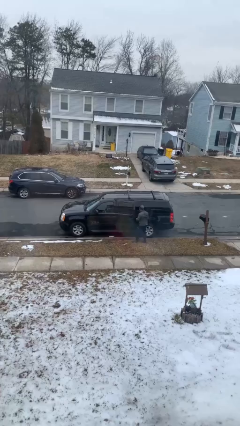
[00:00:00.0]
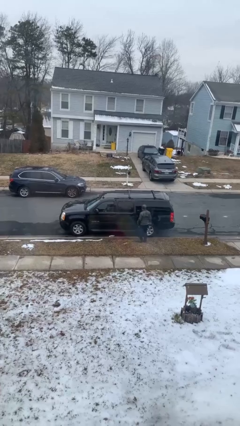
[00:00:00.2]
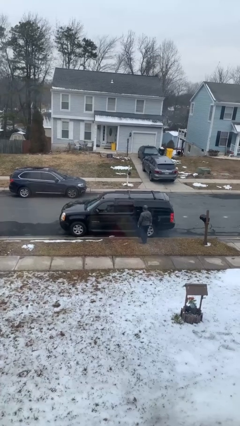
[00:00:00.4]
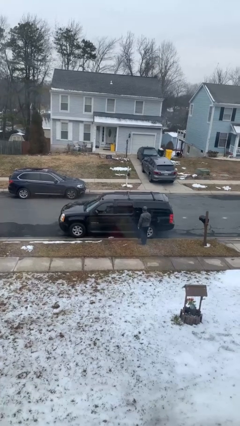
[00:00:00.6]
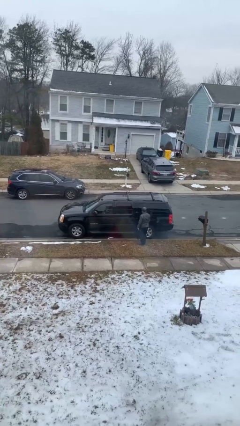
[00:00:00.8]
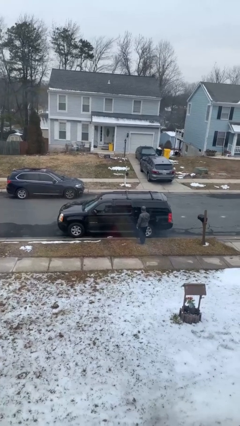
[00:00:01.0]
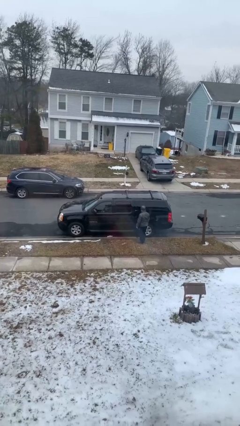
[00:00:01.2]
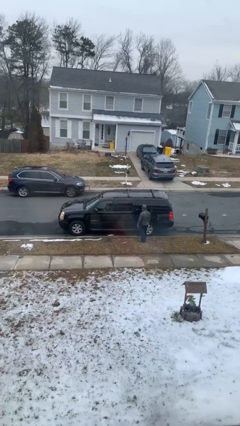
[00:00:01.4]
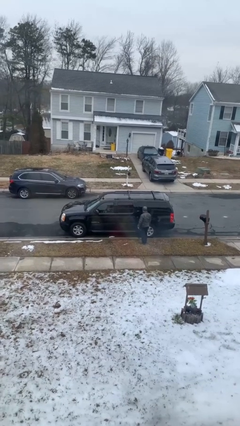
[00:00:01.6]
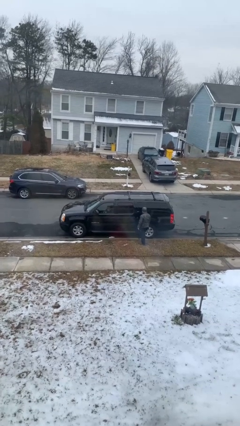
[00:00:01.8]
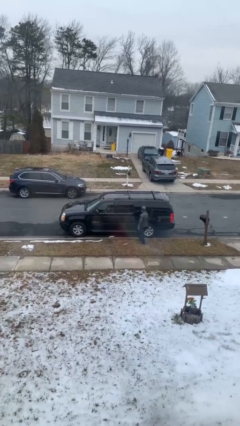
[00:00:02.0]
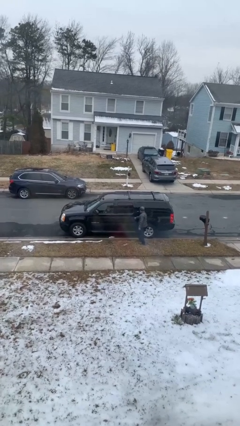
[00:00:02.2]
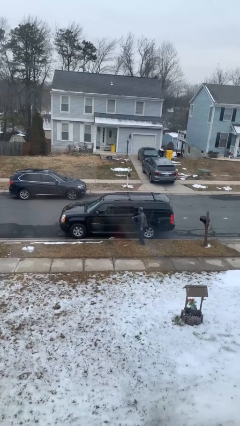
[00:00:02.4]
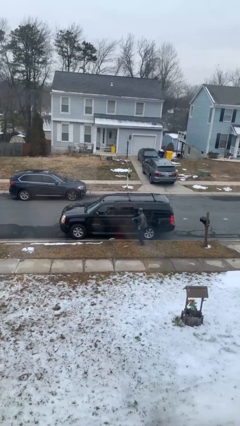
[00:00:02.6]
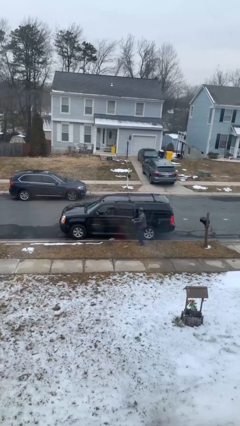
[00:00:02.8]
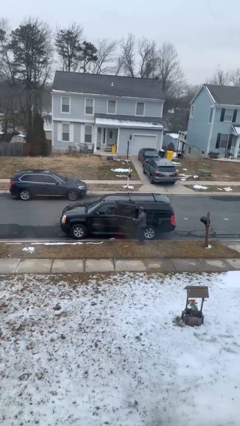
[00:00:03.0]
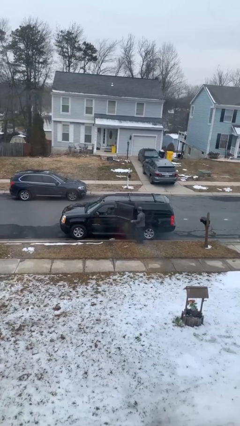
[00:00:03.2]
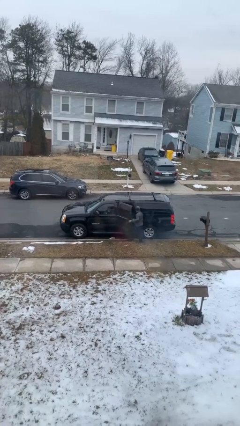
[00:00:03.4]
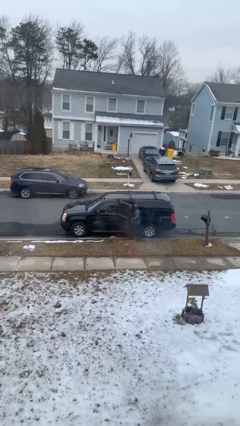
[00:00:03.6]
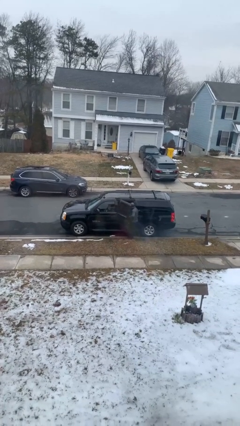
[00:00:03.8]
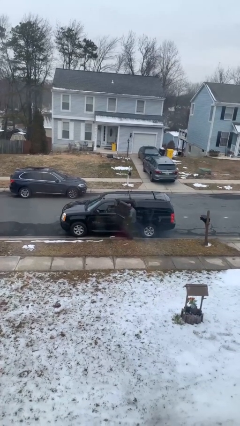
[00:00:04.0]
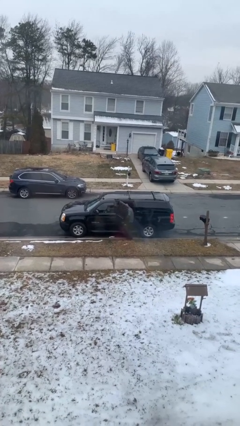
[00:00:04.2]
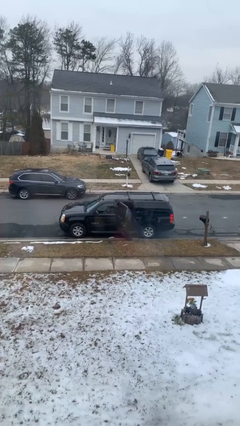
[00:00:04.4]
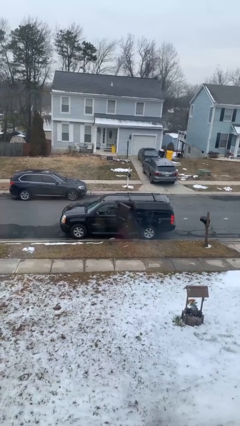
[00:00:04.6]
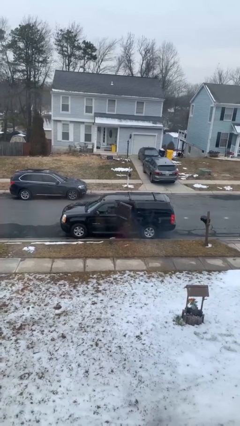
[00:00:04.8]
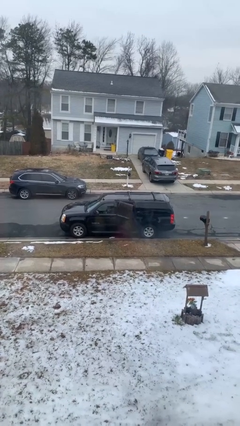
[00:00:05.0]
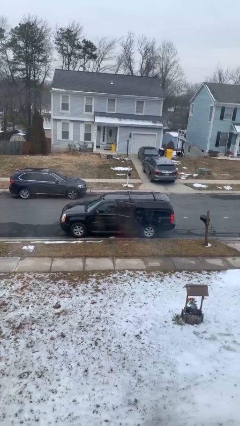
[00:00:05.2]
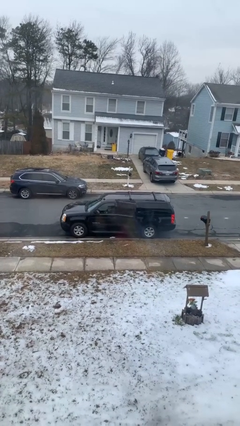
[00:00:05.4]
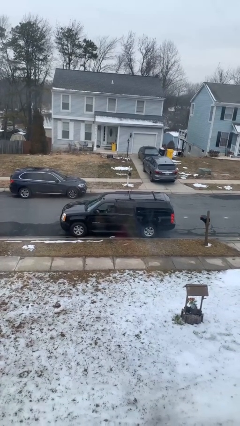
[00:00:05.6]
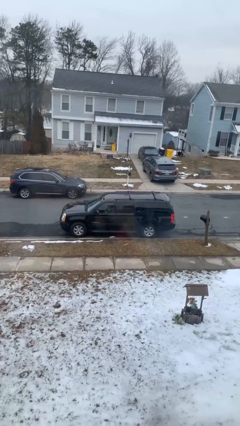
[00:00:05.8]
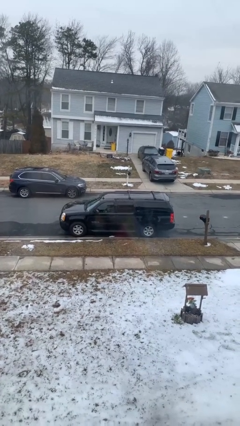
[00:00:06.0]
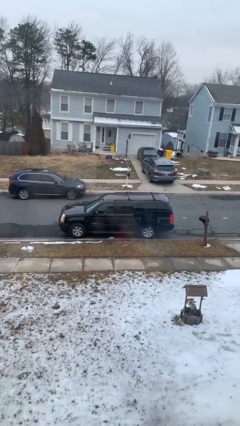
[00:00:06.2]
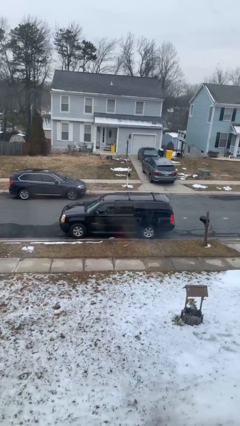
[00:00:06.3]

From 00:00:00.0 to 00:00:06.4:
car picks up person

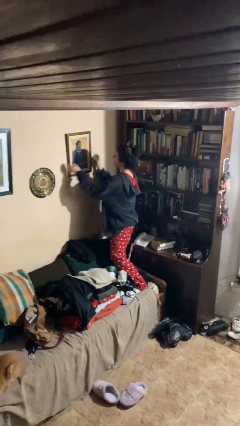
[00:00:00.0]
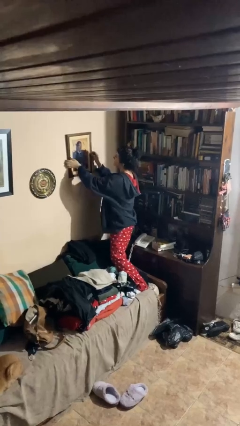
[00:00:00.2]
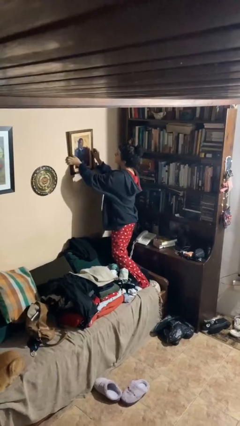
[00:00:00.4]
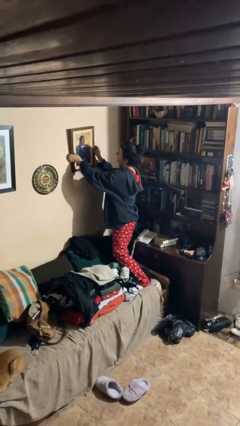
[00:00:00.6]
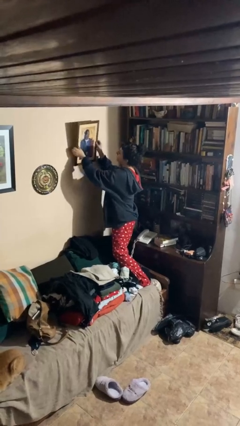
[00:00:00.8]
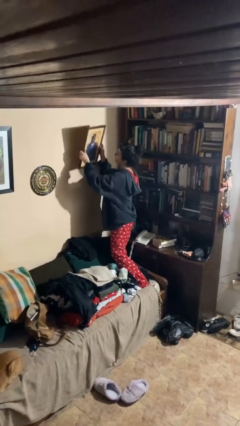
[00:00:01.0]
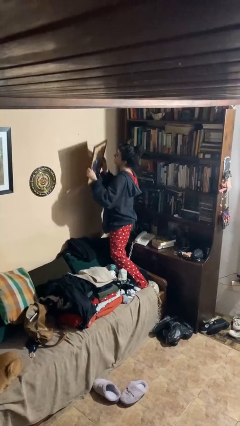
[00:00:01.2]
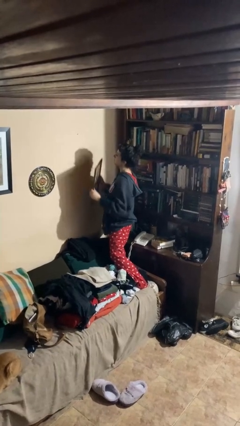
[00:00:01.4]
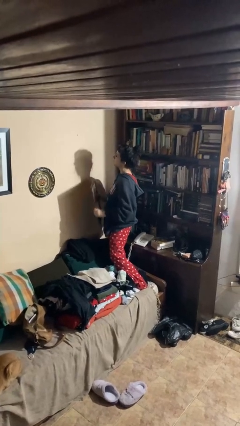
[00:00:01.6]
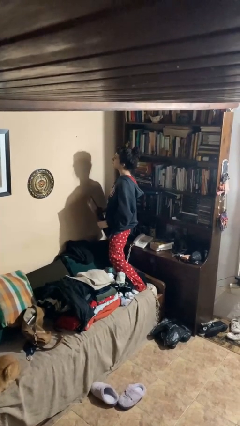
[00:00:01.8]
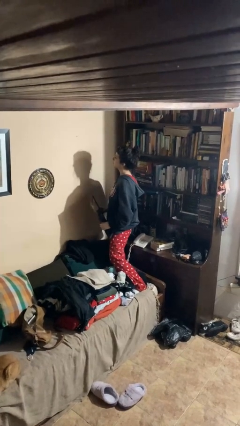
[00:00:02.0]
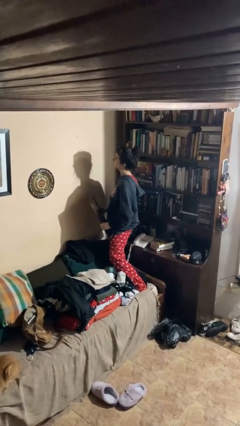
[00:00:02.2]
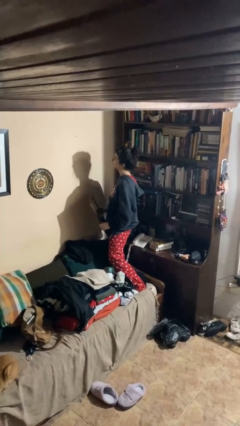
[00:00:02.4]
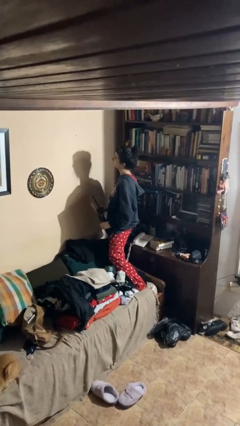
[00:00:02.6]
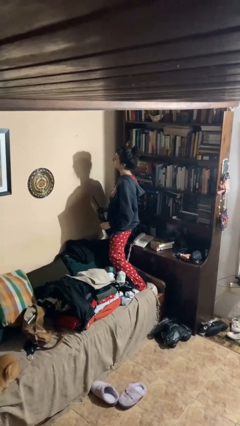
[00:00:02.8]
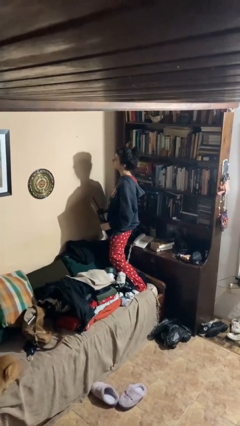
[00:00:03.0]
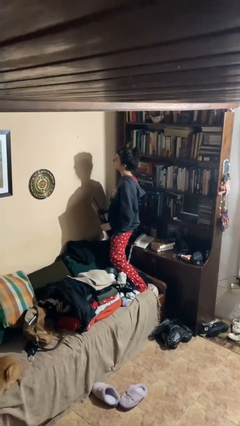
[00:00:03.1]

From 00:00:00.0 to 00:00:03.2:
person takes down picture frame

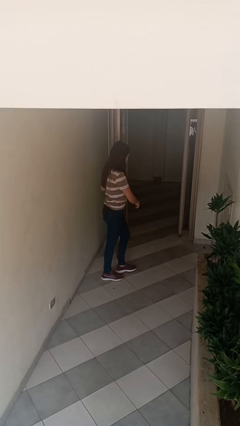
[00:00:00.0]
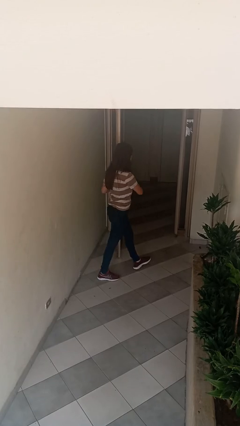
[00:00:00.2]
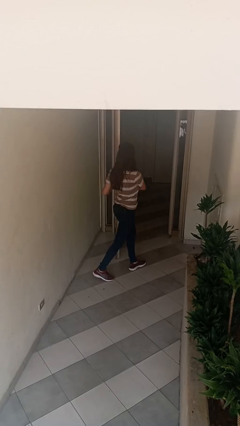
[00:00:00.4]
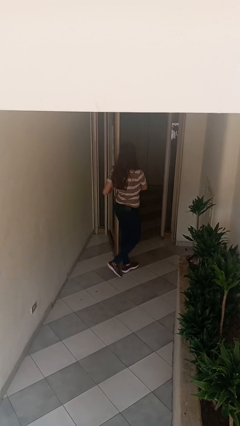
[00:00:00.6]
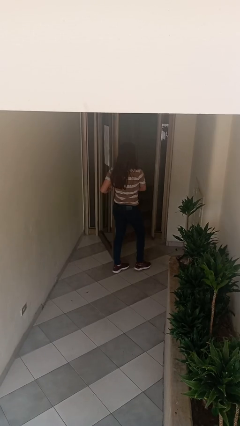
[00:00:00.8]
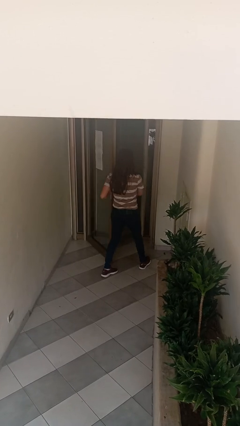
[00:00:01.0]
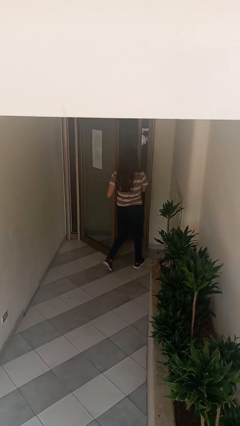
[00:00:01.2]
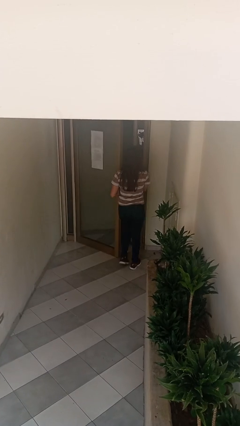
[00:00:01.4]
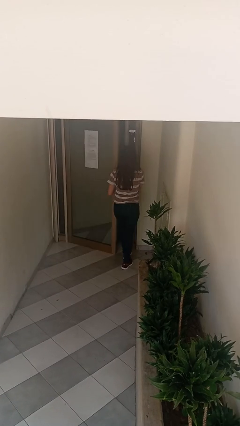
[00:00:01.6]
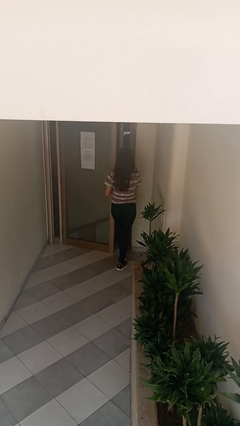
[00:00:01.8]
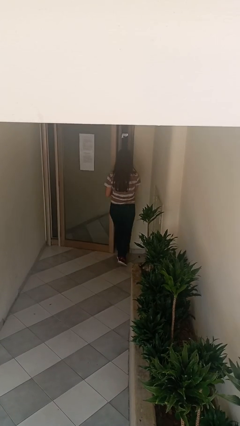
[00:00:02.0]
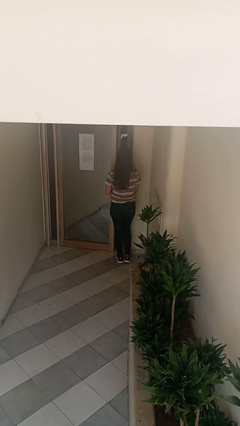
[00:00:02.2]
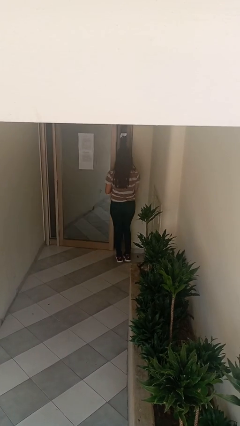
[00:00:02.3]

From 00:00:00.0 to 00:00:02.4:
person closes facility door

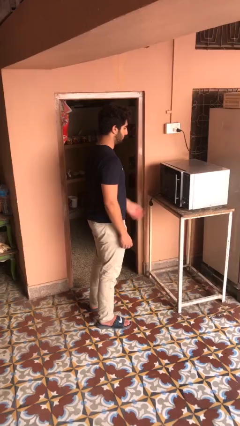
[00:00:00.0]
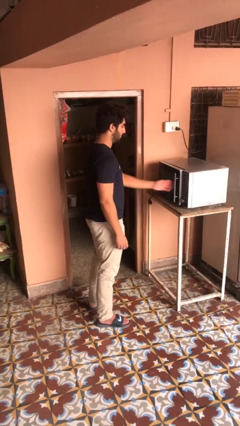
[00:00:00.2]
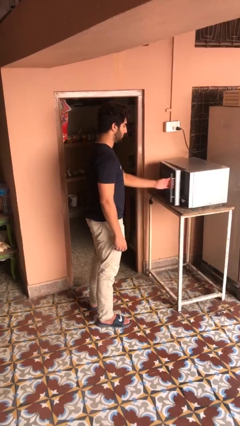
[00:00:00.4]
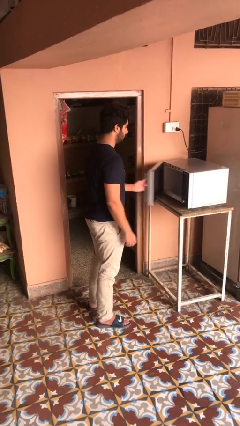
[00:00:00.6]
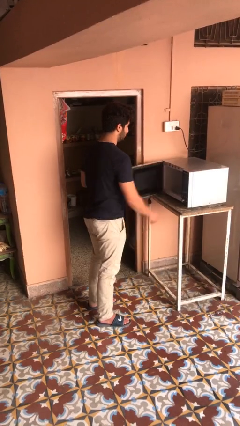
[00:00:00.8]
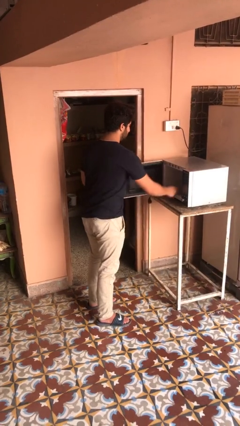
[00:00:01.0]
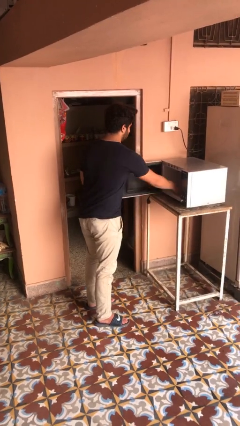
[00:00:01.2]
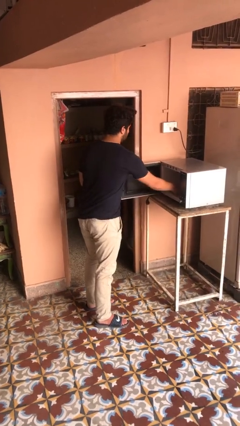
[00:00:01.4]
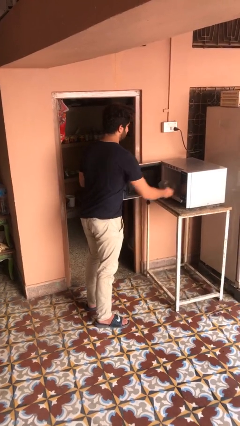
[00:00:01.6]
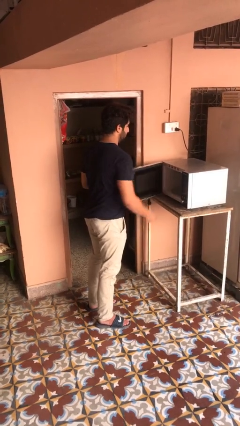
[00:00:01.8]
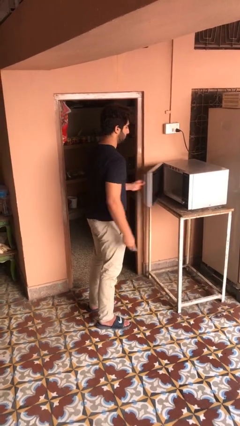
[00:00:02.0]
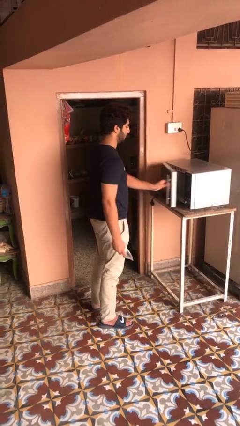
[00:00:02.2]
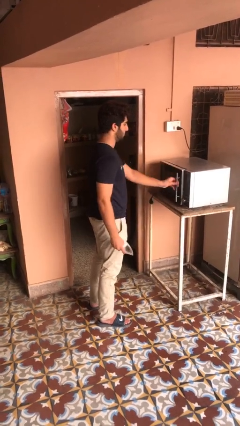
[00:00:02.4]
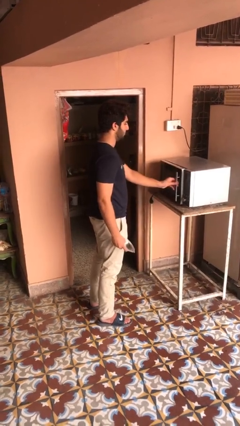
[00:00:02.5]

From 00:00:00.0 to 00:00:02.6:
person takes object from microwave

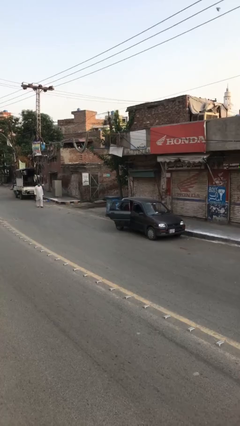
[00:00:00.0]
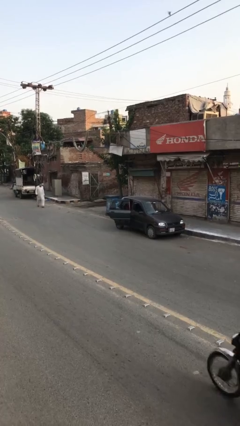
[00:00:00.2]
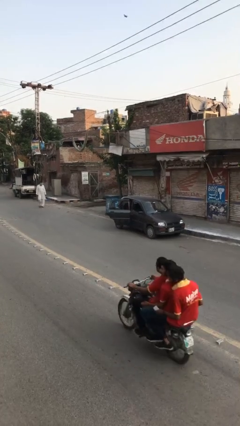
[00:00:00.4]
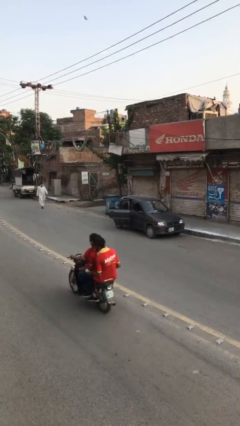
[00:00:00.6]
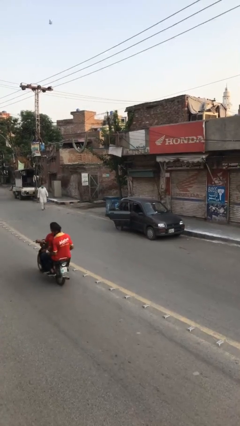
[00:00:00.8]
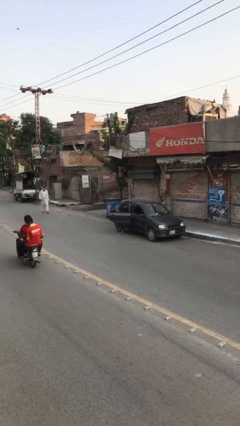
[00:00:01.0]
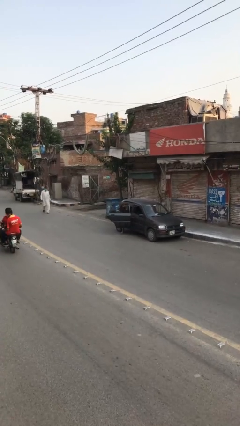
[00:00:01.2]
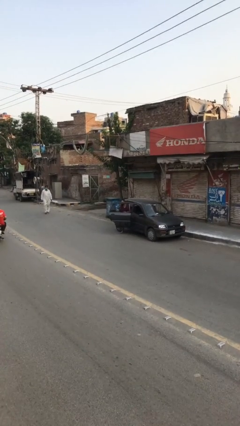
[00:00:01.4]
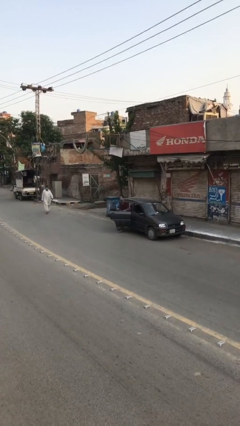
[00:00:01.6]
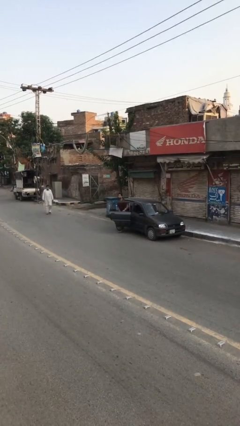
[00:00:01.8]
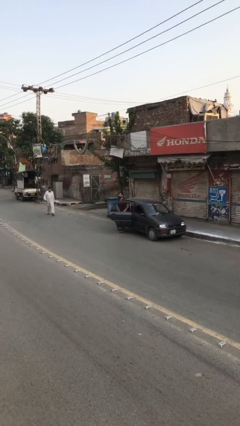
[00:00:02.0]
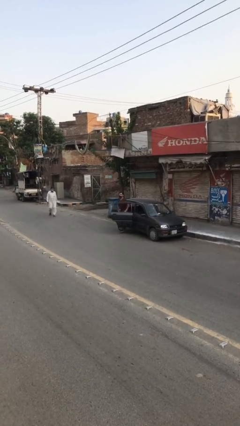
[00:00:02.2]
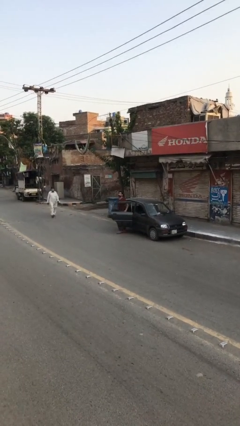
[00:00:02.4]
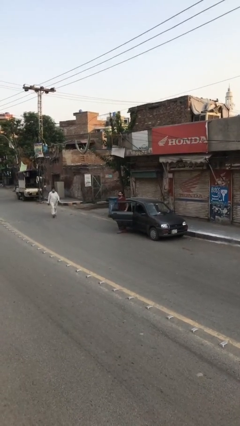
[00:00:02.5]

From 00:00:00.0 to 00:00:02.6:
person exits car

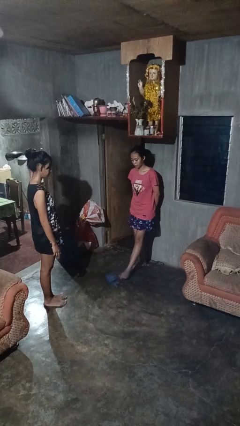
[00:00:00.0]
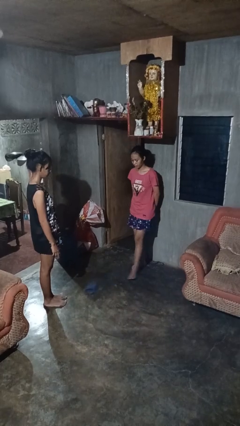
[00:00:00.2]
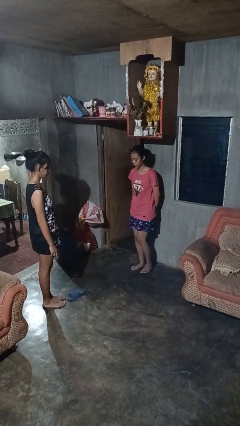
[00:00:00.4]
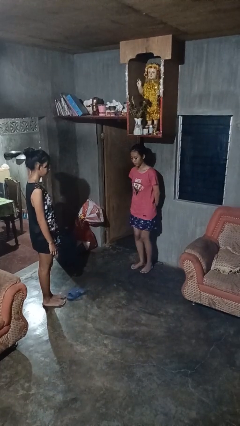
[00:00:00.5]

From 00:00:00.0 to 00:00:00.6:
person kicks object to person
